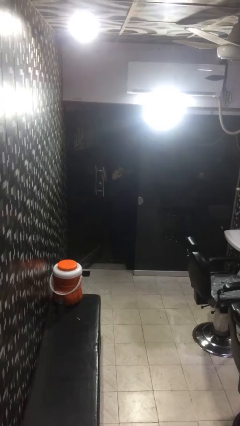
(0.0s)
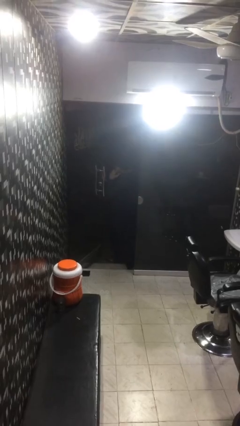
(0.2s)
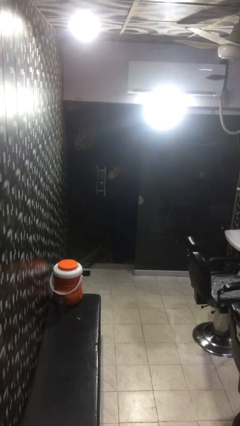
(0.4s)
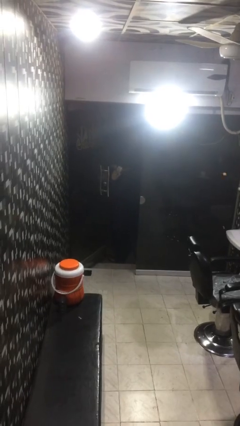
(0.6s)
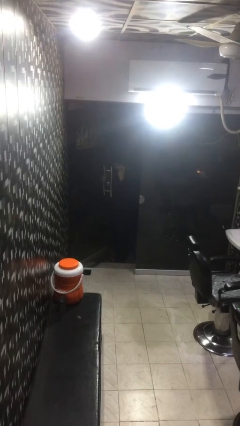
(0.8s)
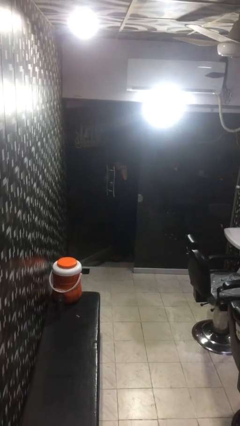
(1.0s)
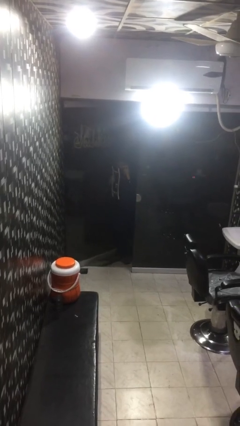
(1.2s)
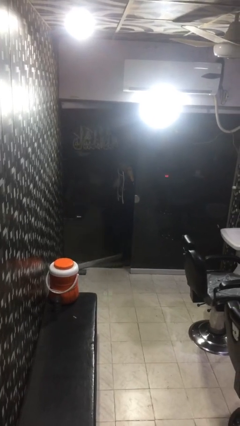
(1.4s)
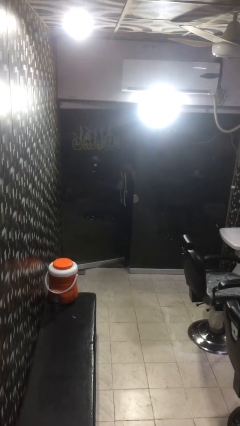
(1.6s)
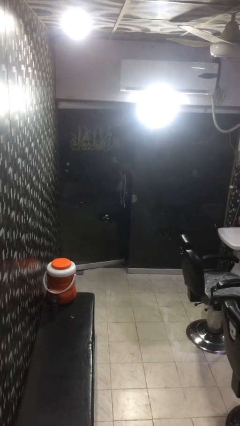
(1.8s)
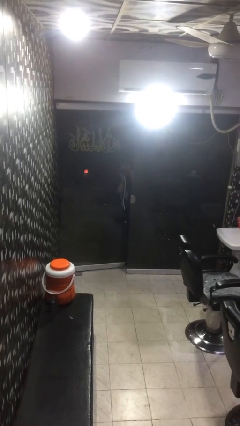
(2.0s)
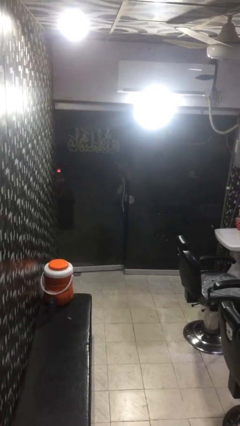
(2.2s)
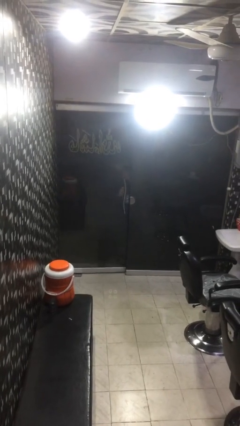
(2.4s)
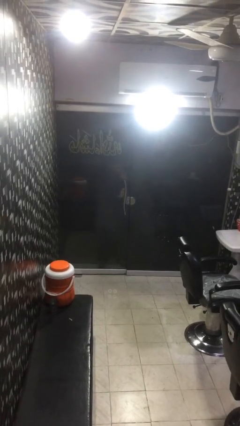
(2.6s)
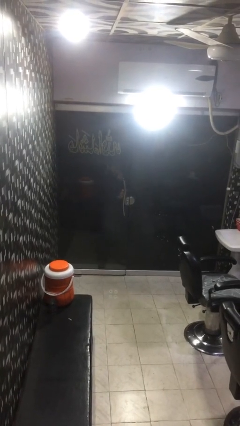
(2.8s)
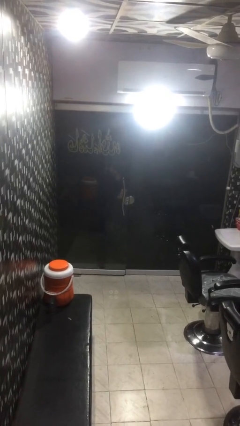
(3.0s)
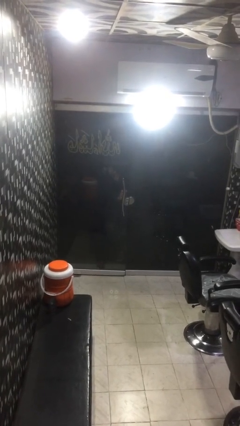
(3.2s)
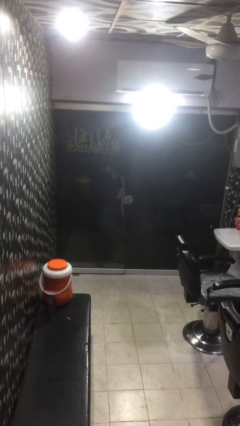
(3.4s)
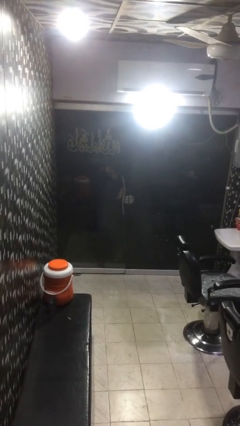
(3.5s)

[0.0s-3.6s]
person closes facility door

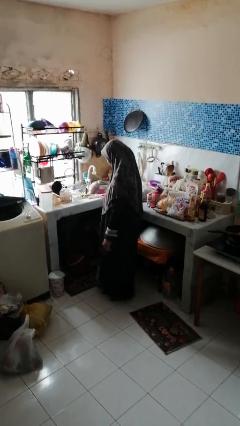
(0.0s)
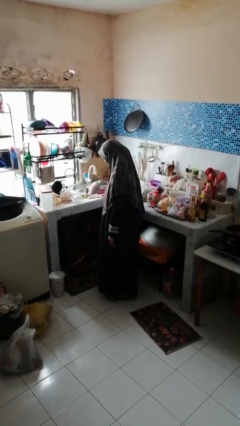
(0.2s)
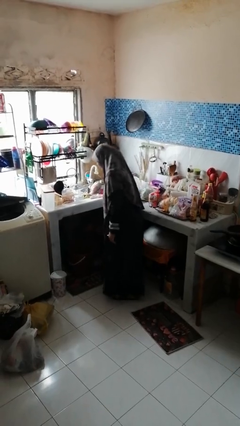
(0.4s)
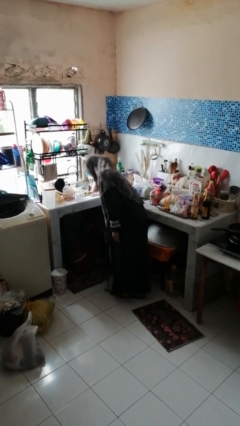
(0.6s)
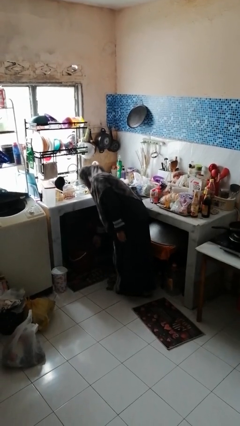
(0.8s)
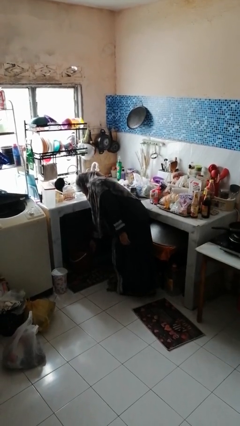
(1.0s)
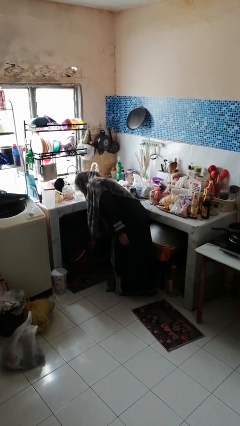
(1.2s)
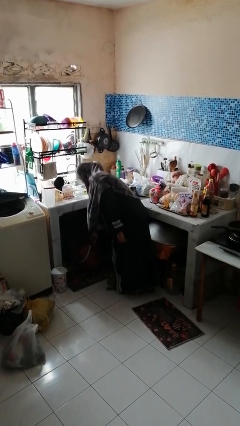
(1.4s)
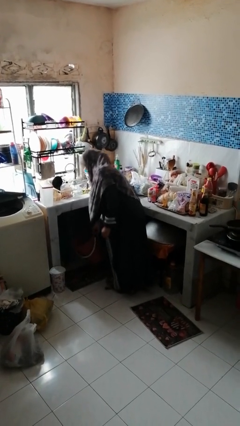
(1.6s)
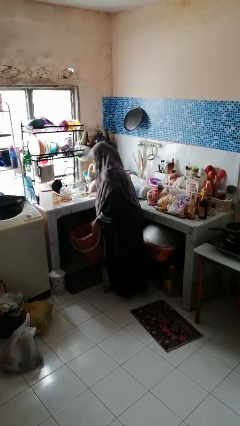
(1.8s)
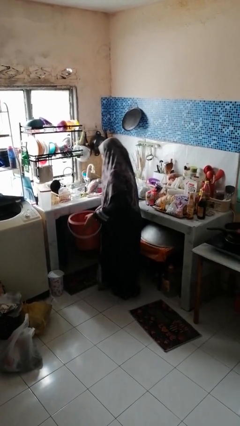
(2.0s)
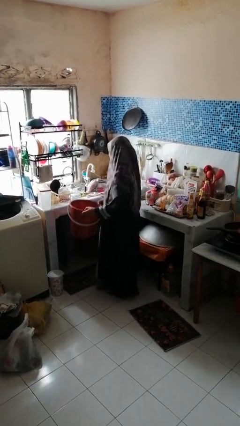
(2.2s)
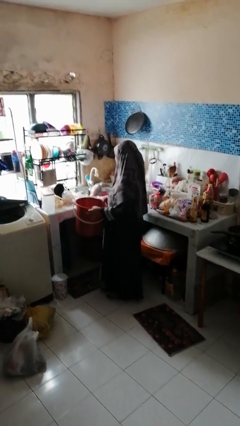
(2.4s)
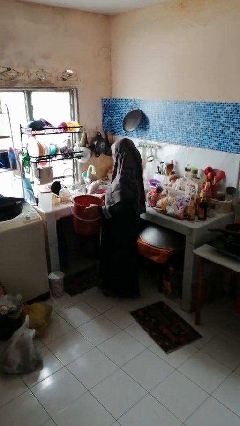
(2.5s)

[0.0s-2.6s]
person picks up object from cabinet

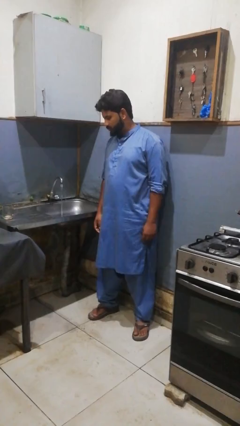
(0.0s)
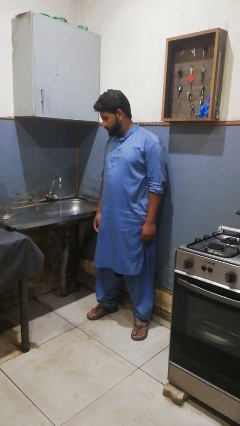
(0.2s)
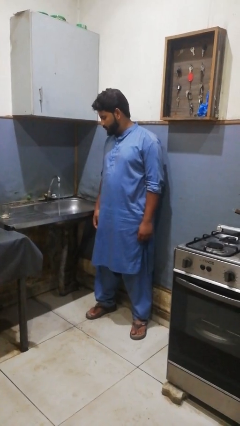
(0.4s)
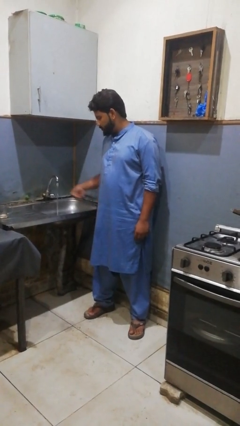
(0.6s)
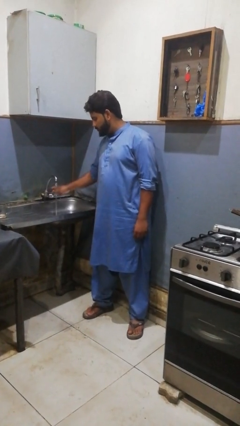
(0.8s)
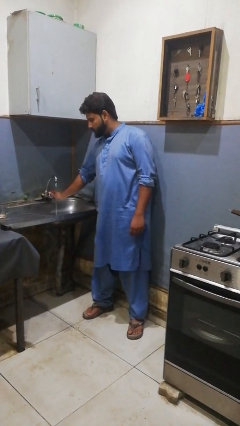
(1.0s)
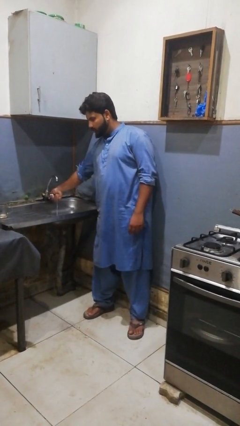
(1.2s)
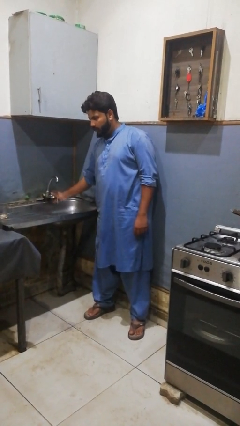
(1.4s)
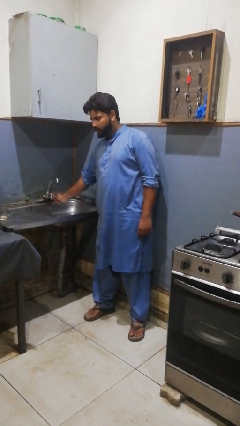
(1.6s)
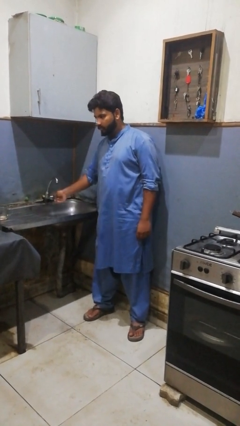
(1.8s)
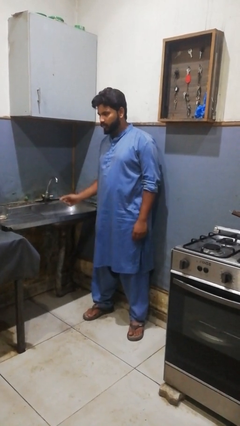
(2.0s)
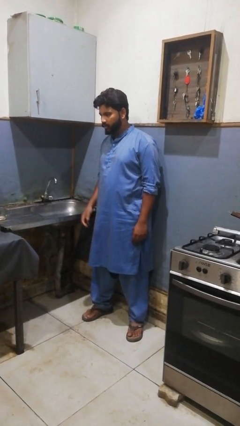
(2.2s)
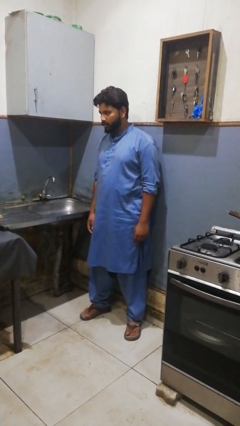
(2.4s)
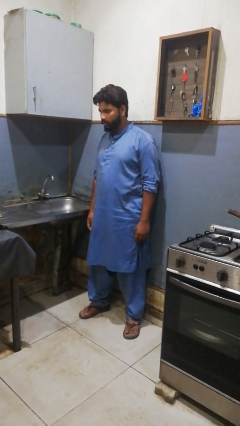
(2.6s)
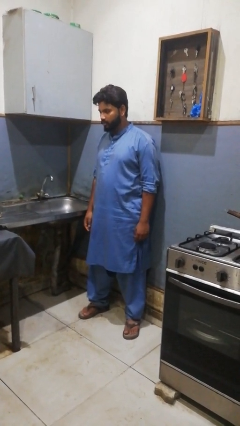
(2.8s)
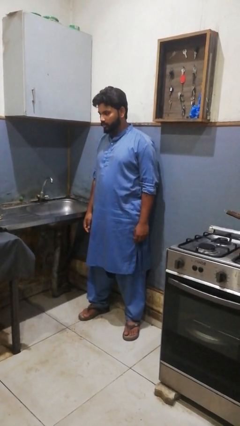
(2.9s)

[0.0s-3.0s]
person turns off faucet

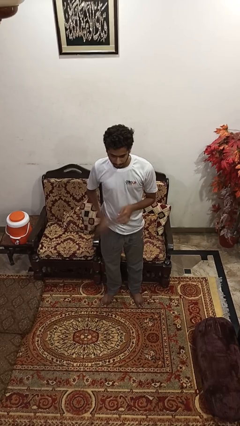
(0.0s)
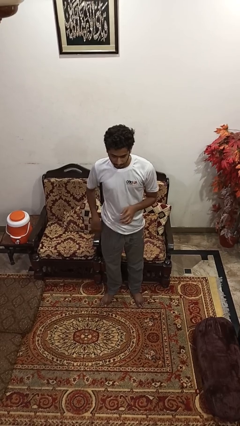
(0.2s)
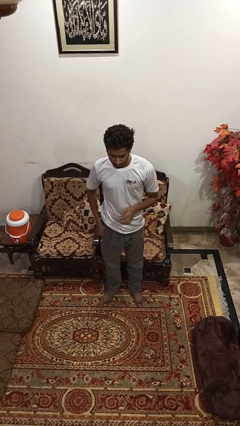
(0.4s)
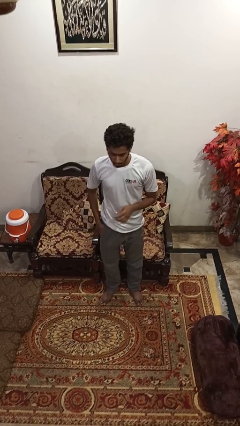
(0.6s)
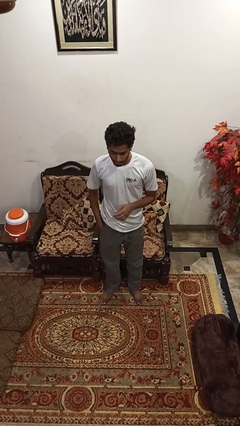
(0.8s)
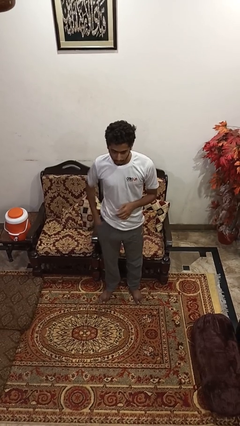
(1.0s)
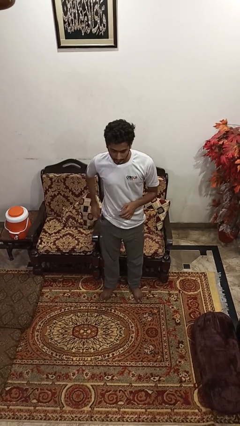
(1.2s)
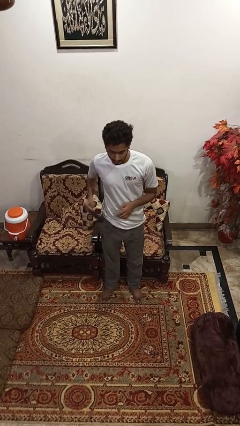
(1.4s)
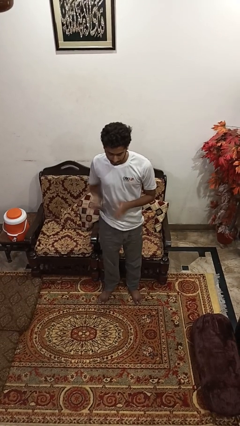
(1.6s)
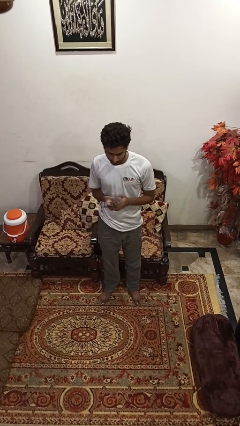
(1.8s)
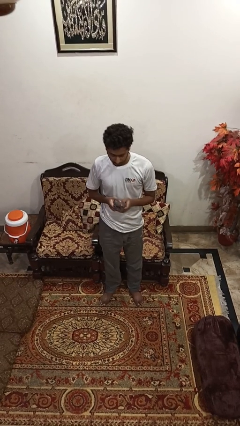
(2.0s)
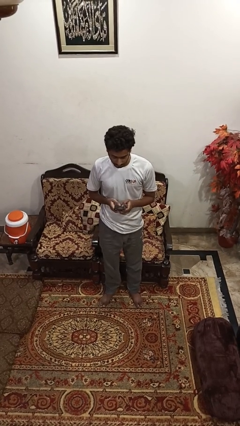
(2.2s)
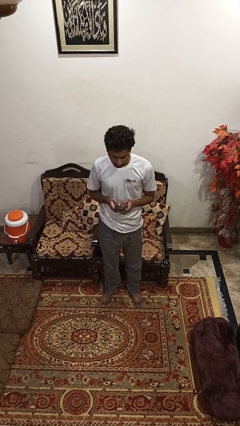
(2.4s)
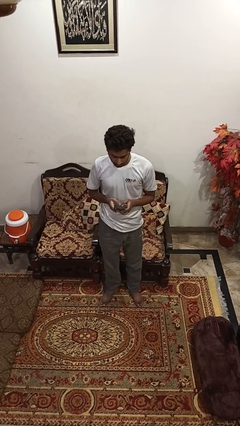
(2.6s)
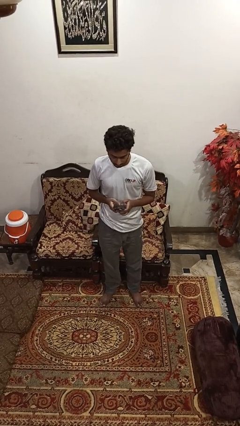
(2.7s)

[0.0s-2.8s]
person takes phone from pocket

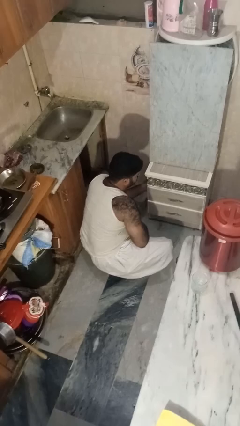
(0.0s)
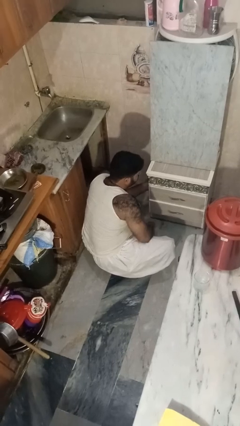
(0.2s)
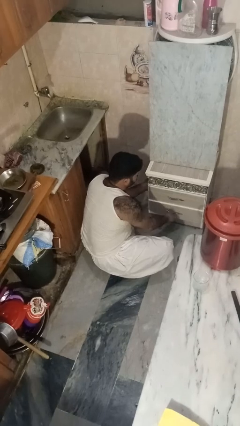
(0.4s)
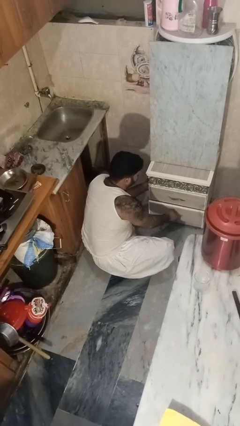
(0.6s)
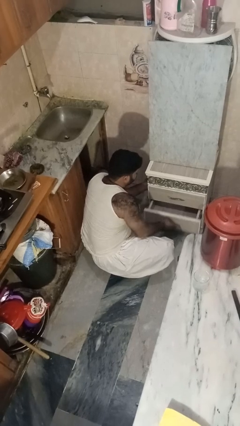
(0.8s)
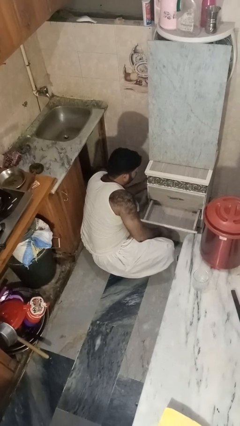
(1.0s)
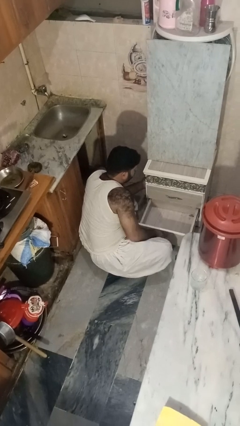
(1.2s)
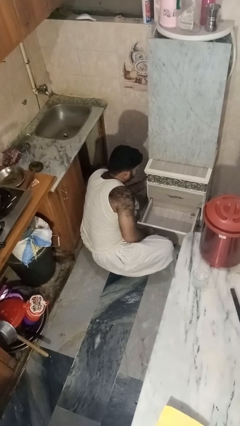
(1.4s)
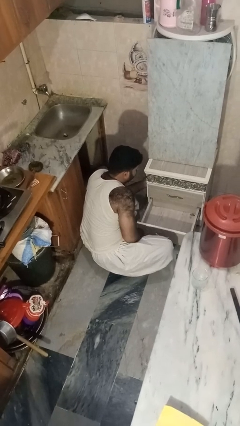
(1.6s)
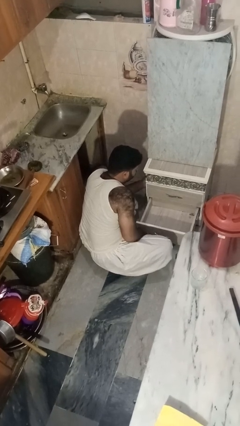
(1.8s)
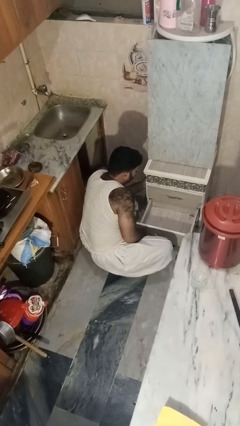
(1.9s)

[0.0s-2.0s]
person opens kitchen drawer

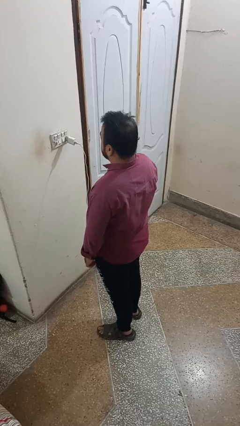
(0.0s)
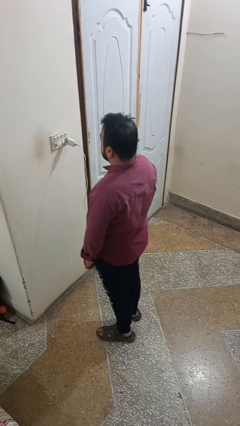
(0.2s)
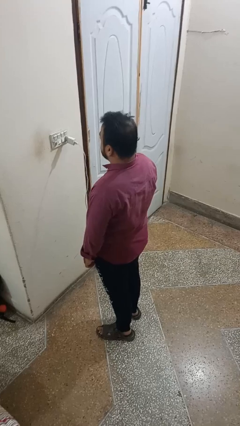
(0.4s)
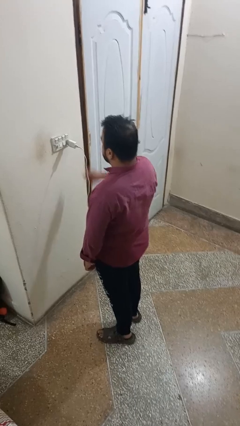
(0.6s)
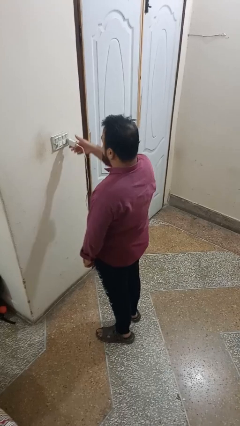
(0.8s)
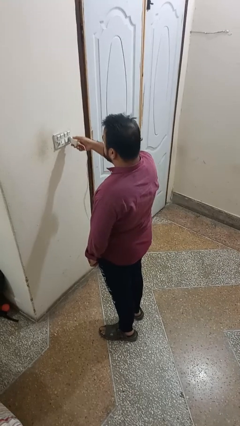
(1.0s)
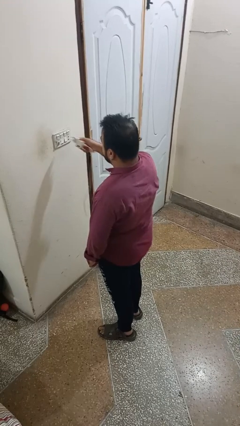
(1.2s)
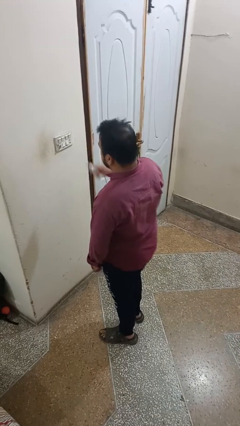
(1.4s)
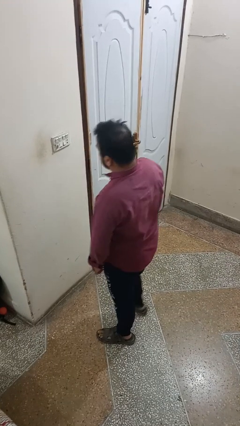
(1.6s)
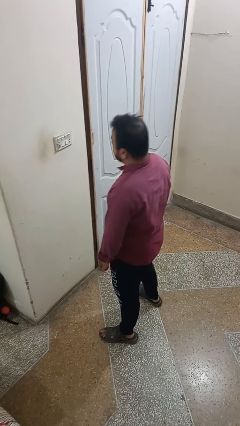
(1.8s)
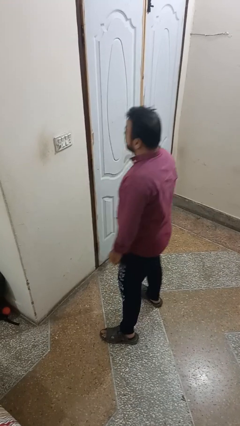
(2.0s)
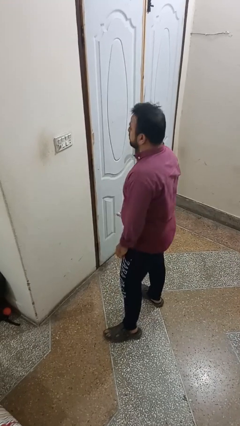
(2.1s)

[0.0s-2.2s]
person unplugs from electrical socket

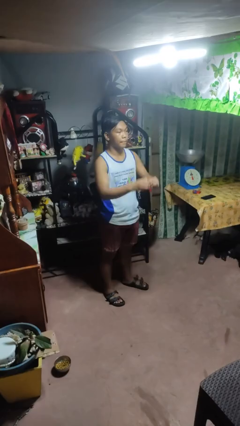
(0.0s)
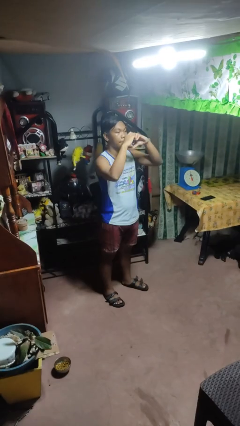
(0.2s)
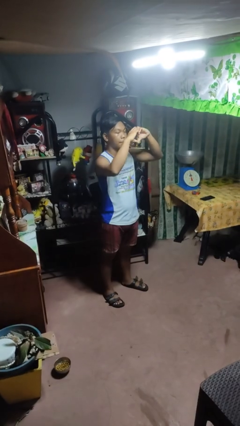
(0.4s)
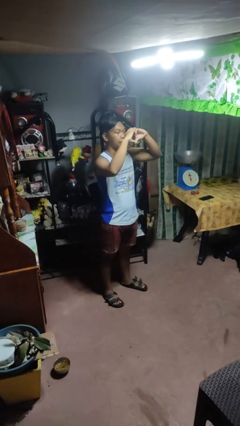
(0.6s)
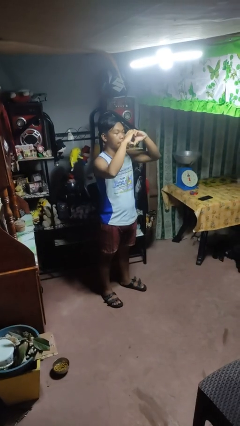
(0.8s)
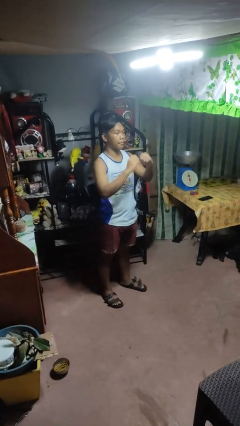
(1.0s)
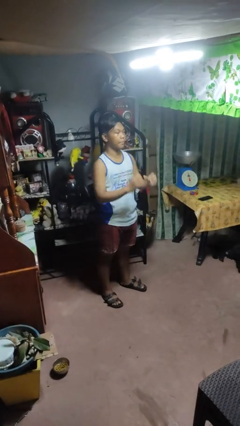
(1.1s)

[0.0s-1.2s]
person gestures heart
